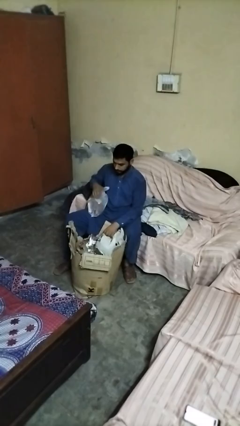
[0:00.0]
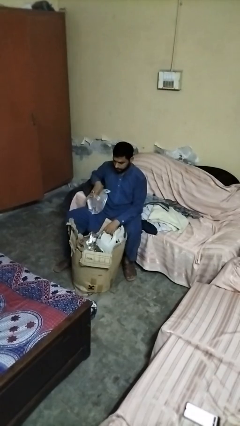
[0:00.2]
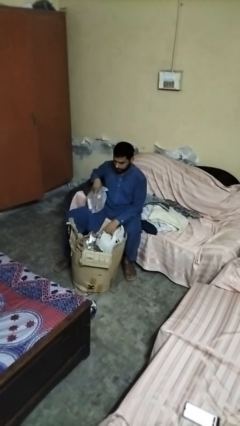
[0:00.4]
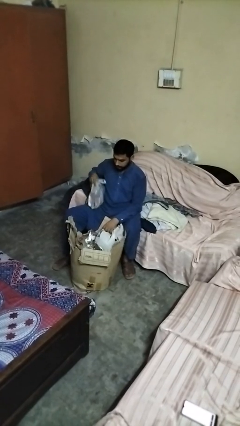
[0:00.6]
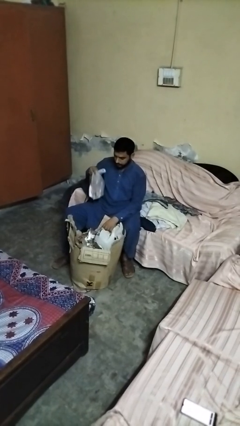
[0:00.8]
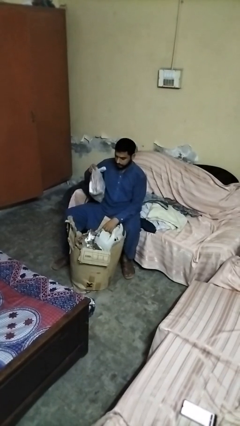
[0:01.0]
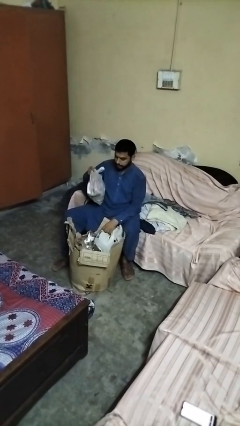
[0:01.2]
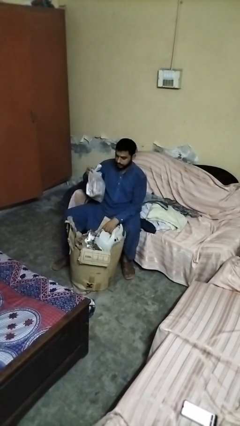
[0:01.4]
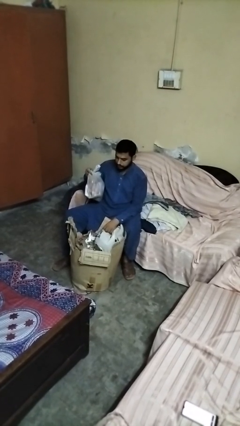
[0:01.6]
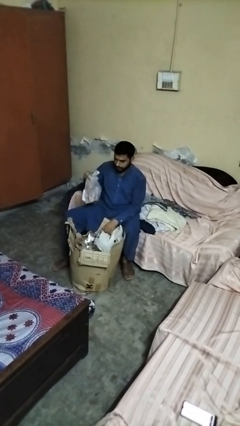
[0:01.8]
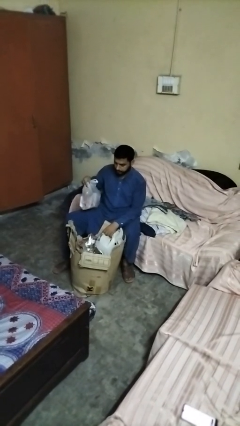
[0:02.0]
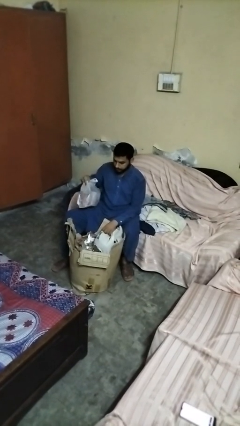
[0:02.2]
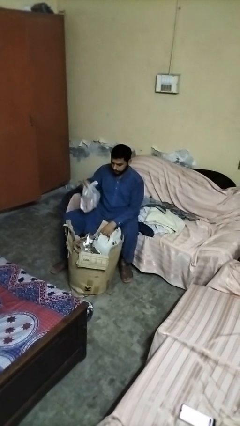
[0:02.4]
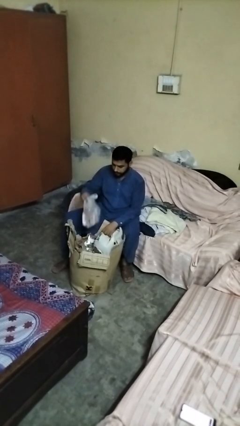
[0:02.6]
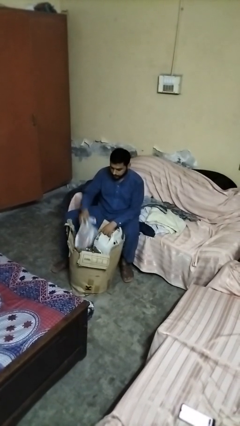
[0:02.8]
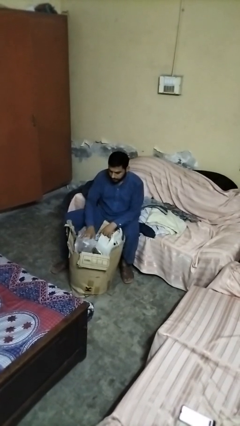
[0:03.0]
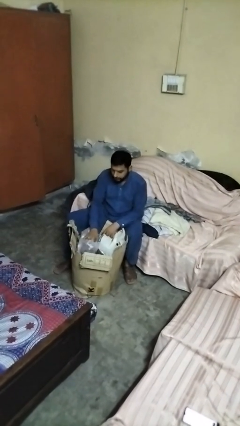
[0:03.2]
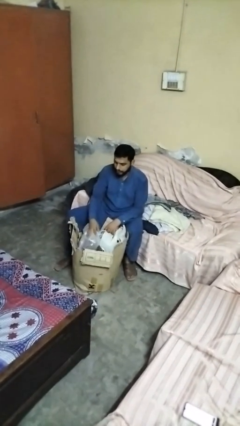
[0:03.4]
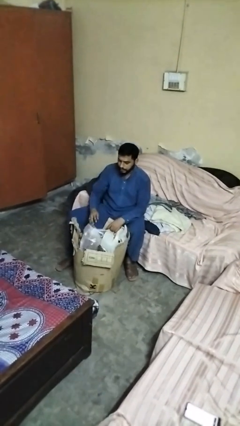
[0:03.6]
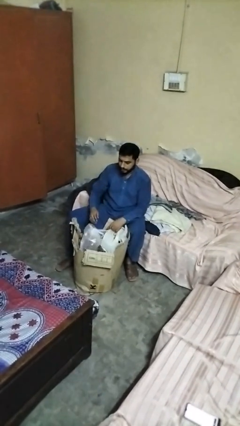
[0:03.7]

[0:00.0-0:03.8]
person puts object into box

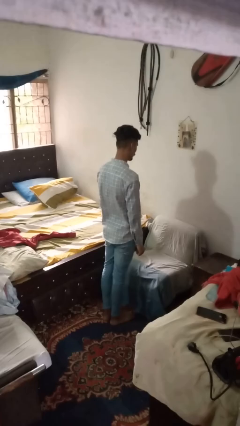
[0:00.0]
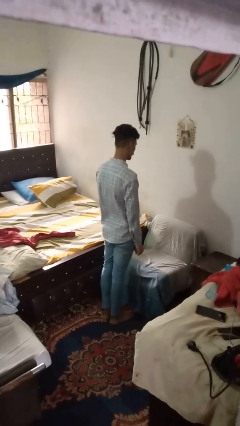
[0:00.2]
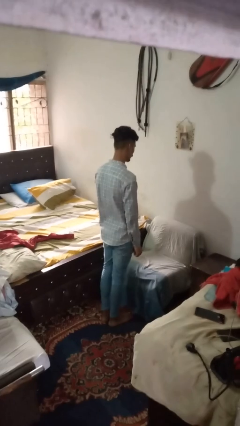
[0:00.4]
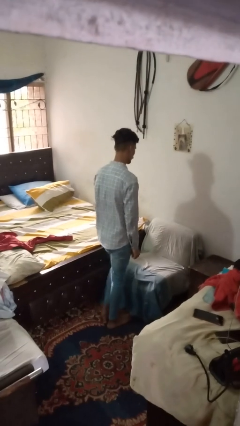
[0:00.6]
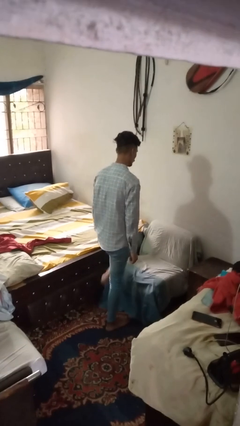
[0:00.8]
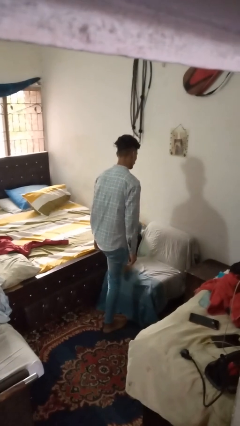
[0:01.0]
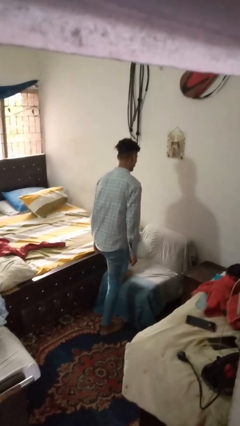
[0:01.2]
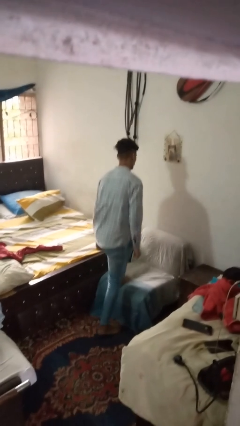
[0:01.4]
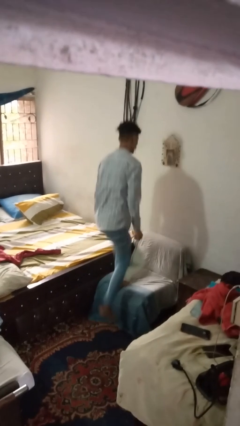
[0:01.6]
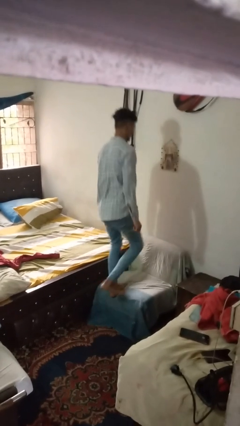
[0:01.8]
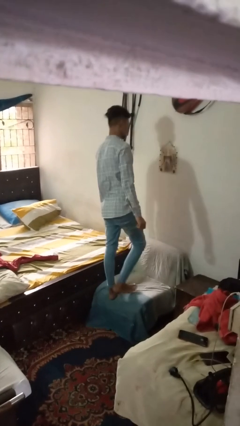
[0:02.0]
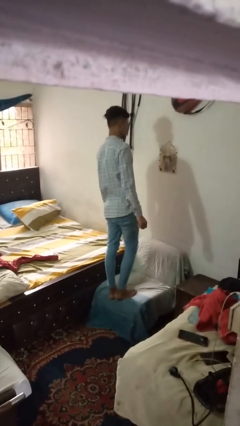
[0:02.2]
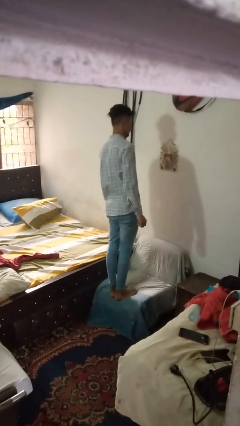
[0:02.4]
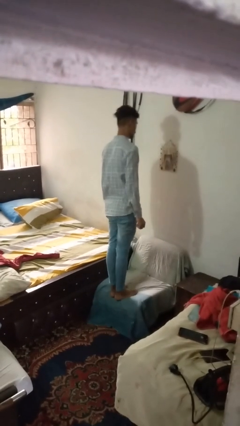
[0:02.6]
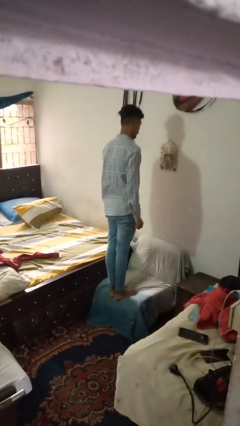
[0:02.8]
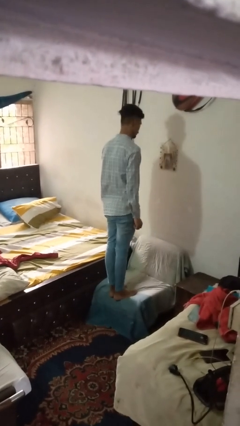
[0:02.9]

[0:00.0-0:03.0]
person climbs on couch

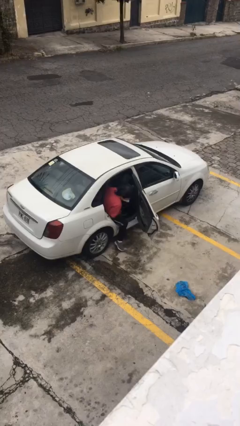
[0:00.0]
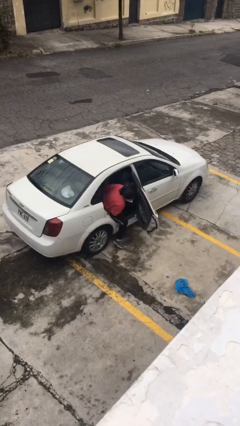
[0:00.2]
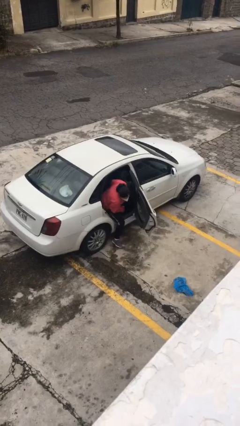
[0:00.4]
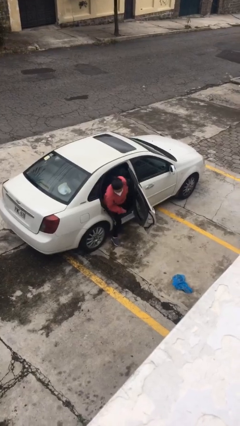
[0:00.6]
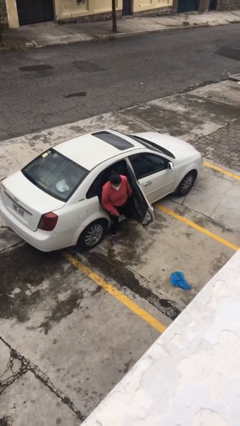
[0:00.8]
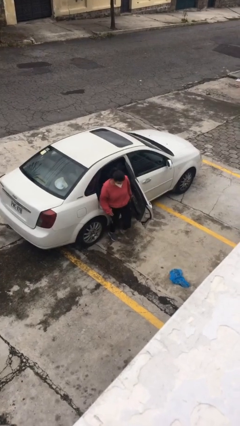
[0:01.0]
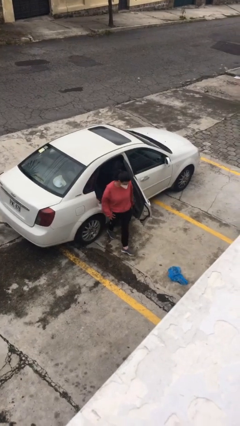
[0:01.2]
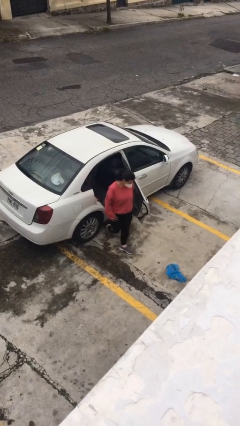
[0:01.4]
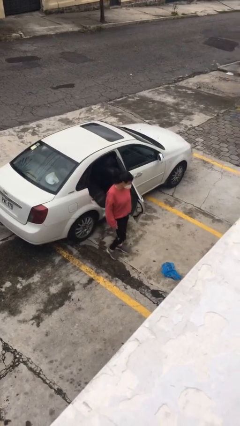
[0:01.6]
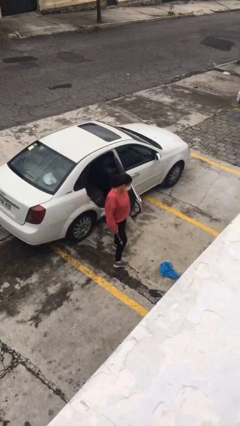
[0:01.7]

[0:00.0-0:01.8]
person exits car

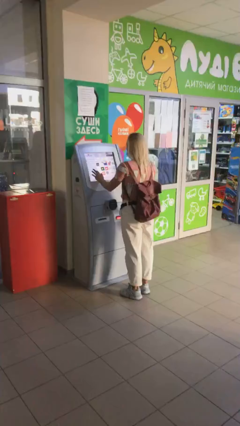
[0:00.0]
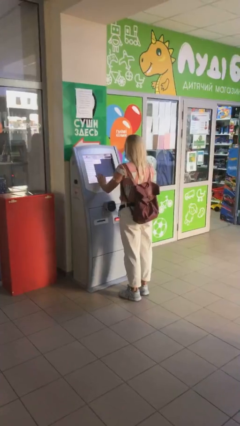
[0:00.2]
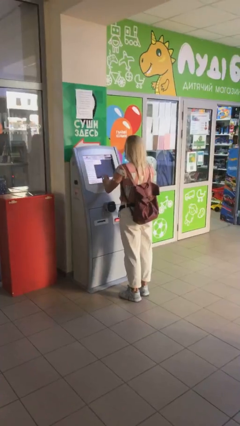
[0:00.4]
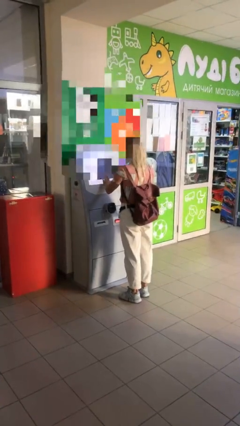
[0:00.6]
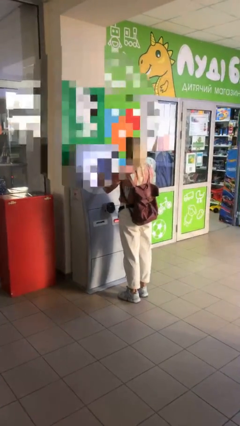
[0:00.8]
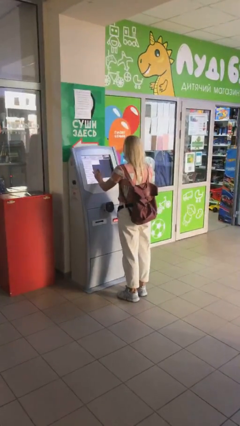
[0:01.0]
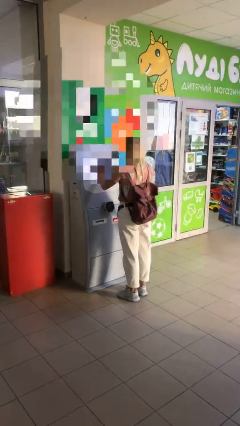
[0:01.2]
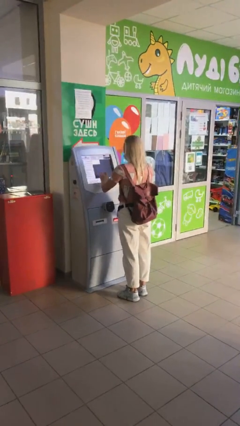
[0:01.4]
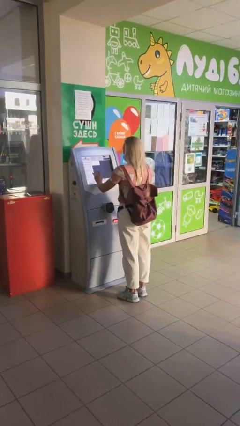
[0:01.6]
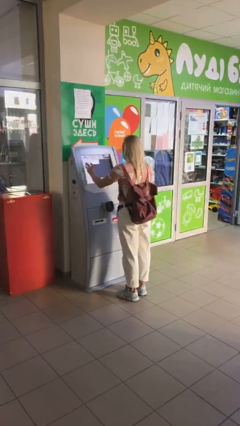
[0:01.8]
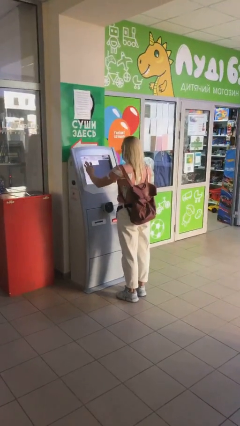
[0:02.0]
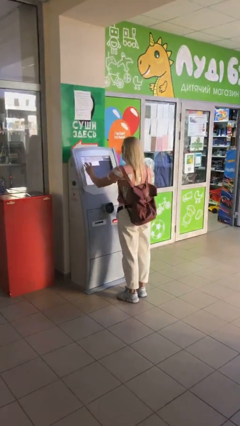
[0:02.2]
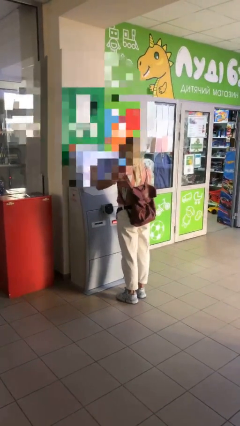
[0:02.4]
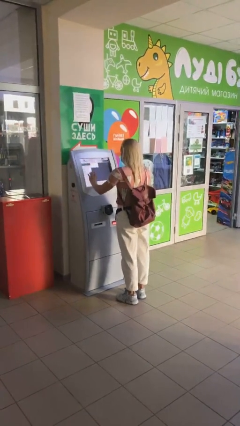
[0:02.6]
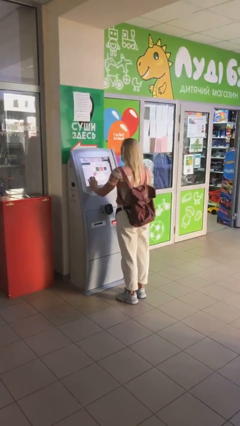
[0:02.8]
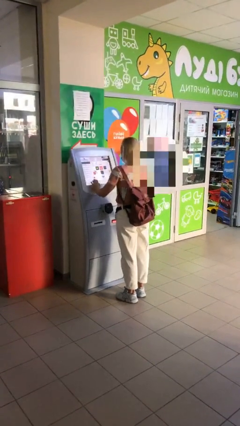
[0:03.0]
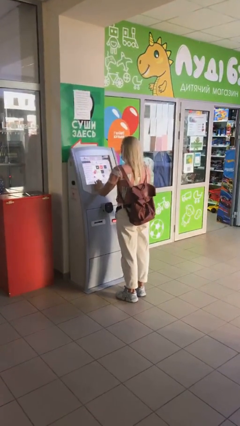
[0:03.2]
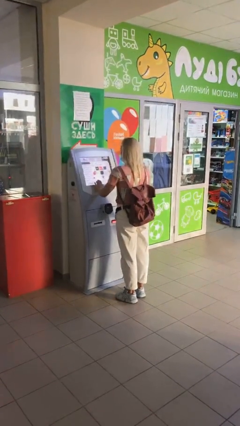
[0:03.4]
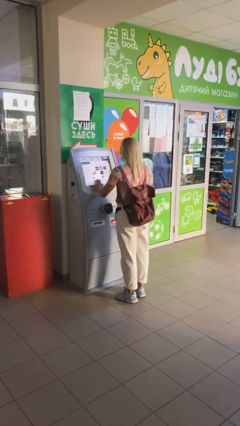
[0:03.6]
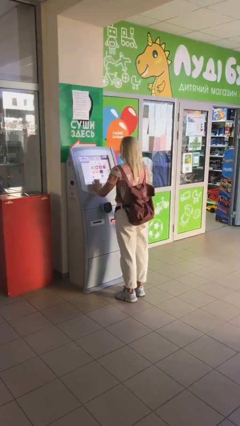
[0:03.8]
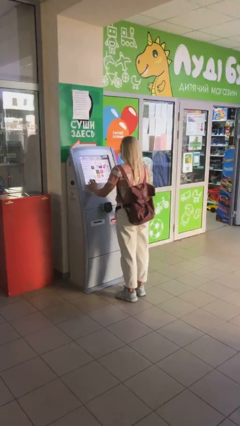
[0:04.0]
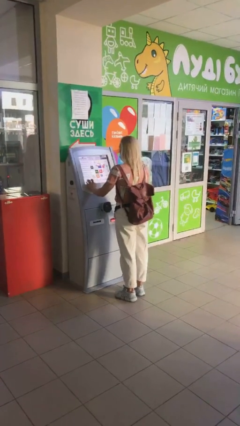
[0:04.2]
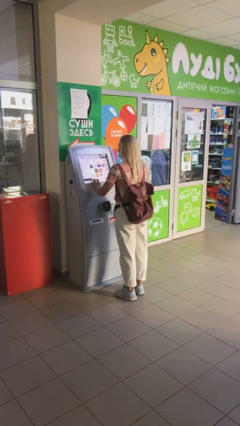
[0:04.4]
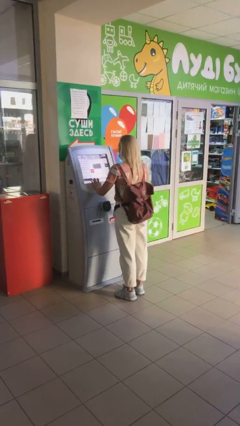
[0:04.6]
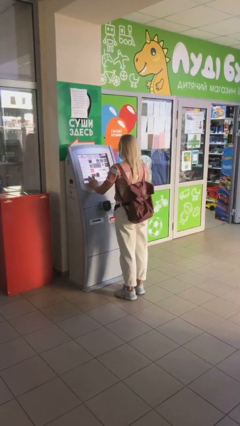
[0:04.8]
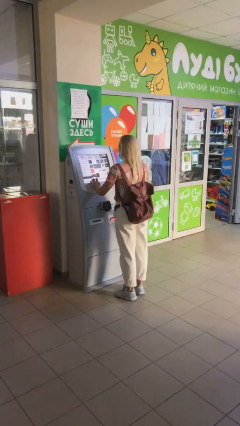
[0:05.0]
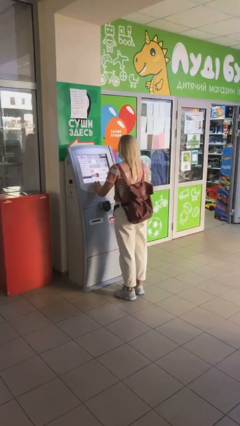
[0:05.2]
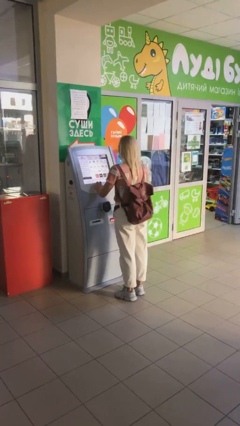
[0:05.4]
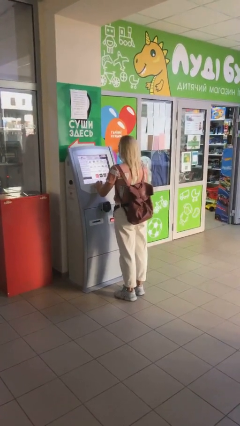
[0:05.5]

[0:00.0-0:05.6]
person purchases from machine

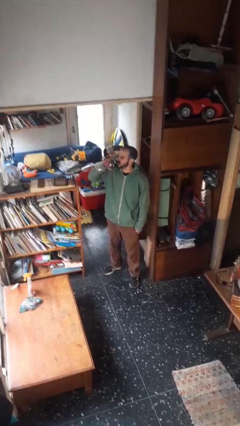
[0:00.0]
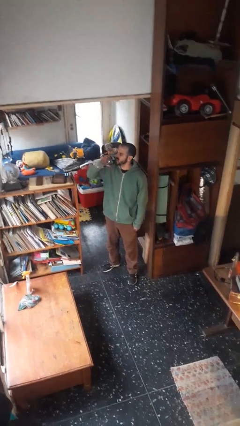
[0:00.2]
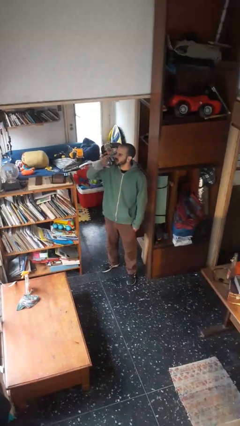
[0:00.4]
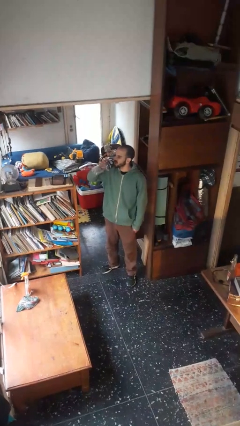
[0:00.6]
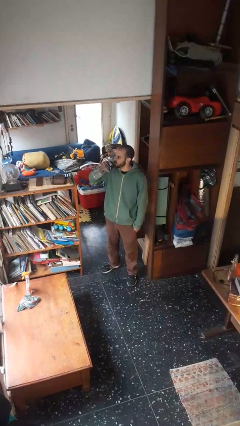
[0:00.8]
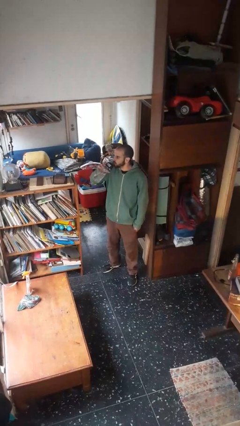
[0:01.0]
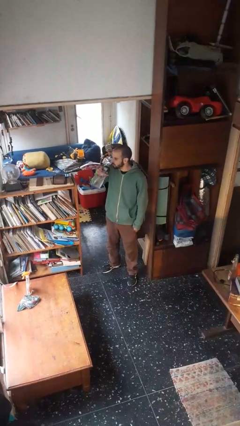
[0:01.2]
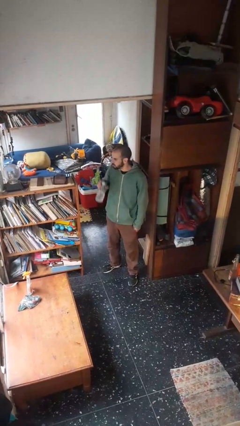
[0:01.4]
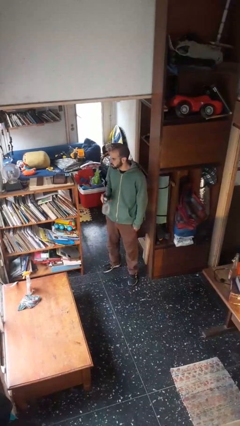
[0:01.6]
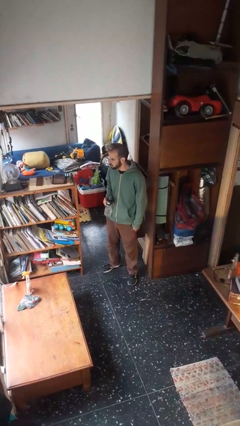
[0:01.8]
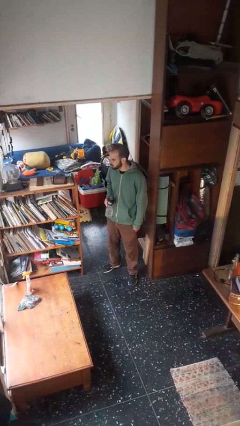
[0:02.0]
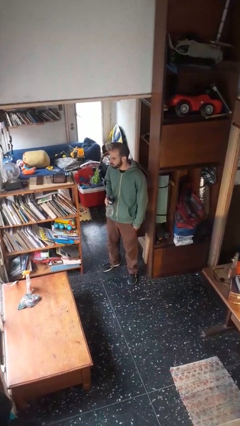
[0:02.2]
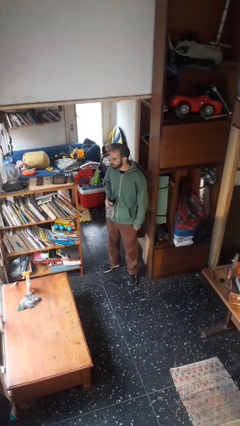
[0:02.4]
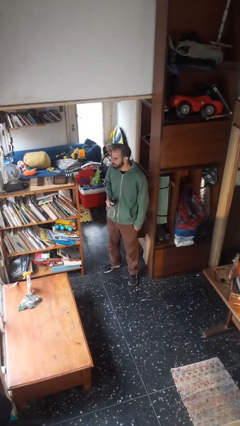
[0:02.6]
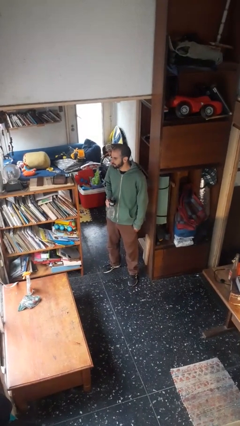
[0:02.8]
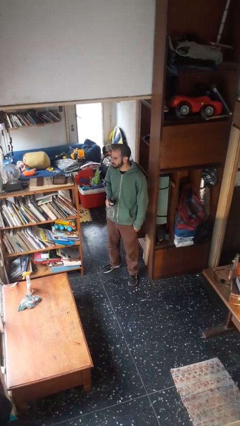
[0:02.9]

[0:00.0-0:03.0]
person drinks from bottle

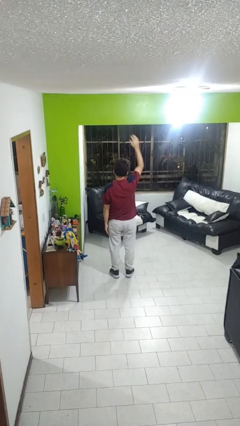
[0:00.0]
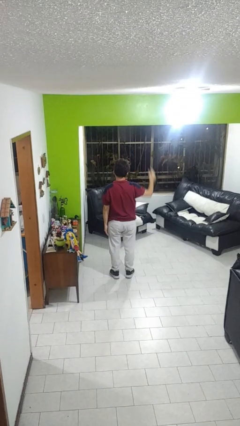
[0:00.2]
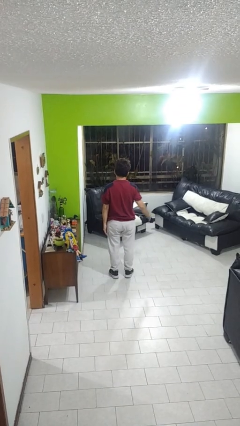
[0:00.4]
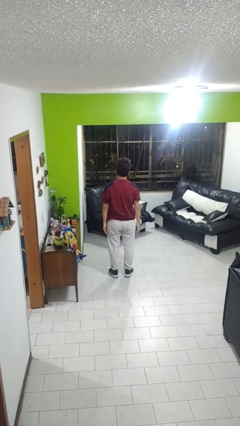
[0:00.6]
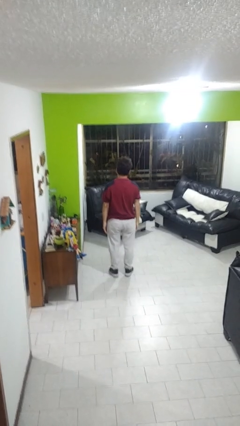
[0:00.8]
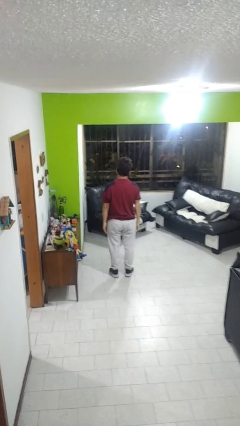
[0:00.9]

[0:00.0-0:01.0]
person gestures lower hand
